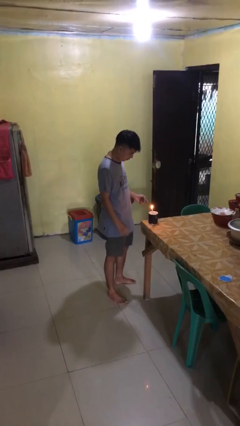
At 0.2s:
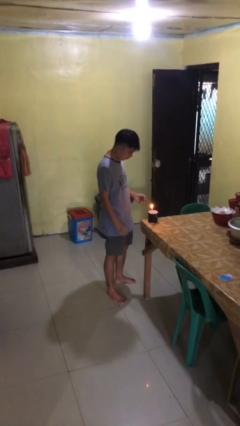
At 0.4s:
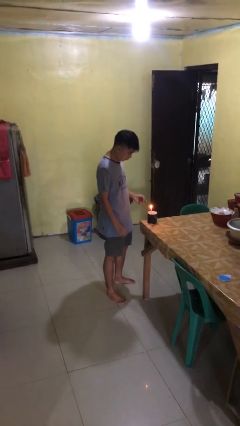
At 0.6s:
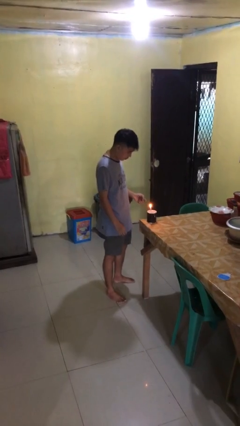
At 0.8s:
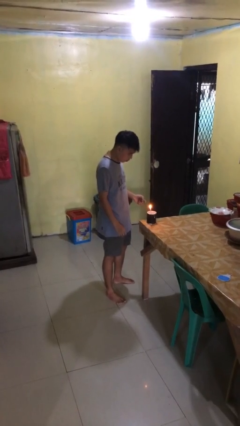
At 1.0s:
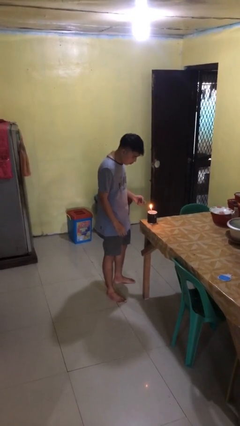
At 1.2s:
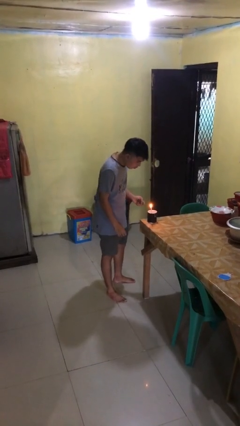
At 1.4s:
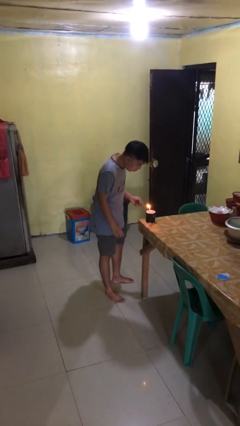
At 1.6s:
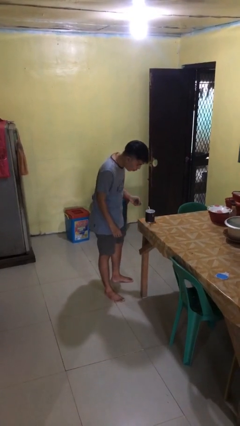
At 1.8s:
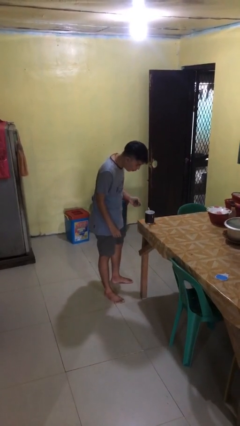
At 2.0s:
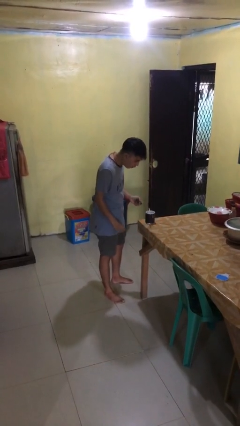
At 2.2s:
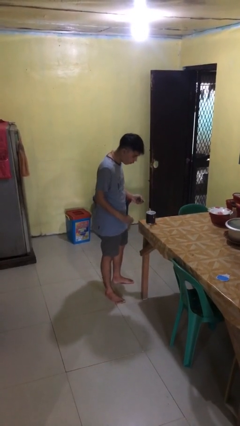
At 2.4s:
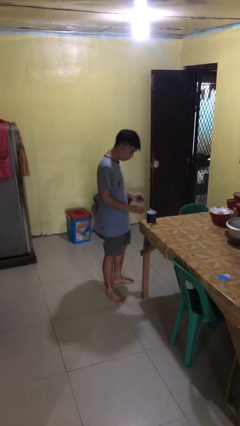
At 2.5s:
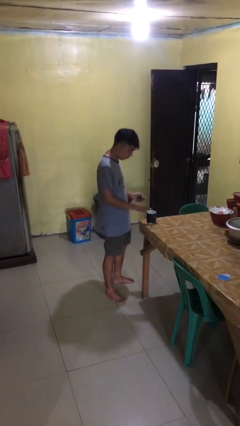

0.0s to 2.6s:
person extinguishes candle

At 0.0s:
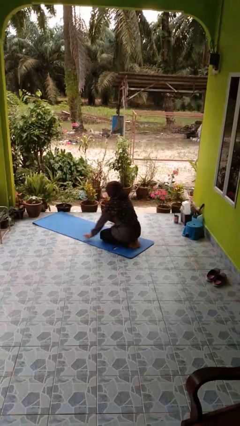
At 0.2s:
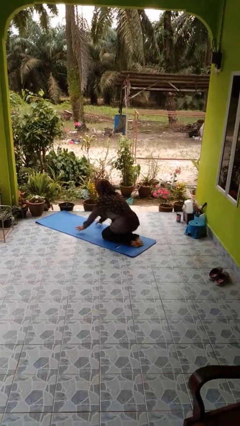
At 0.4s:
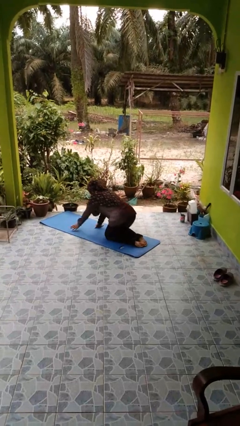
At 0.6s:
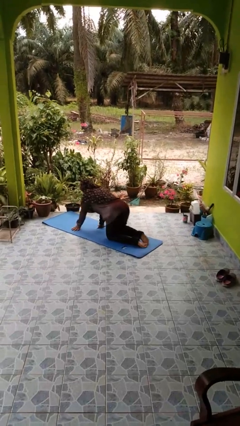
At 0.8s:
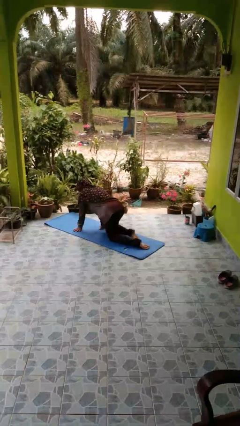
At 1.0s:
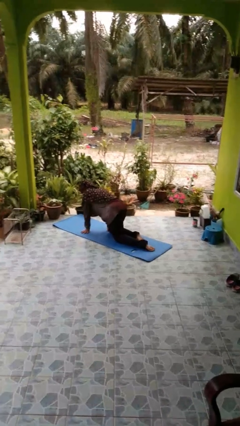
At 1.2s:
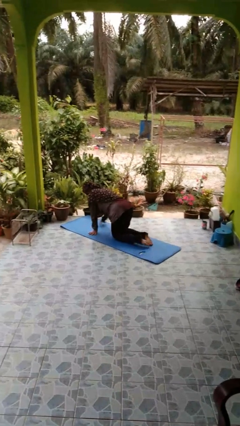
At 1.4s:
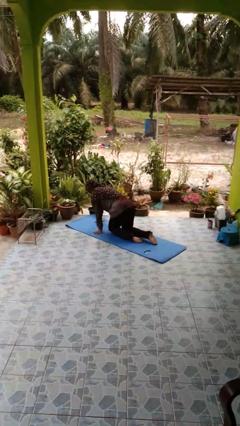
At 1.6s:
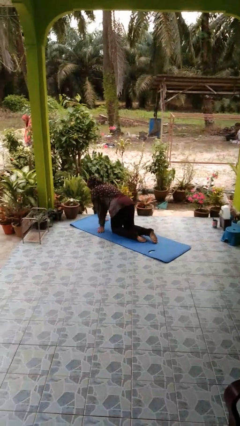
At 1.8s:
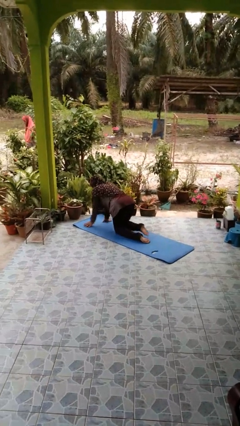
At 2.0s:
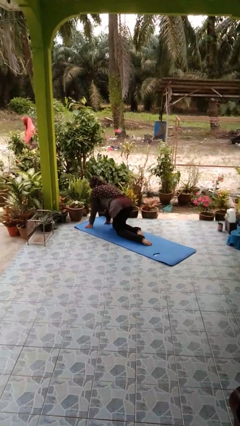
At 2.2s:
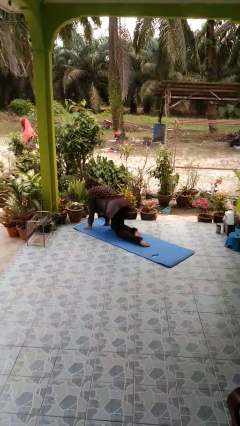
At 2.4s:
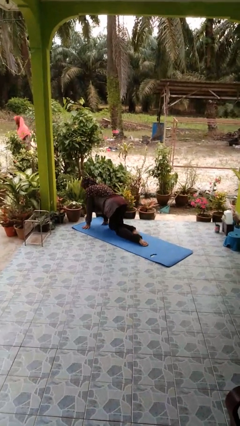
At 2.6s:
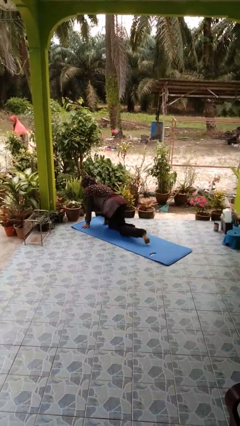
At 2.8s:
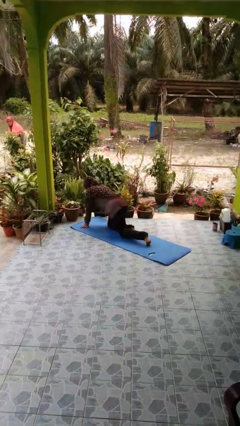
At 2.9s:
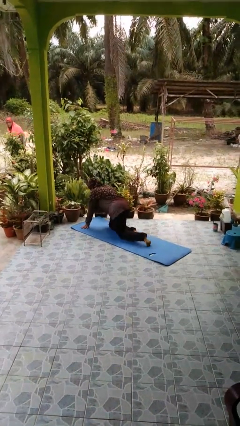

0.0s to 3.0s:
person crawls

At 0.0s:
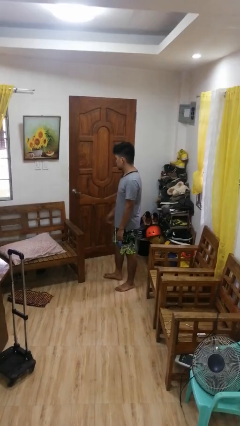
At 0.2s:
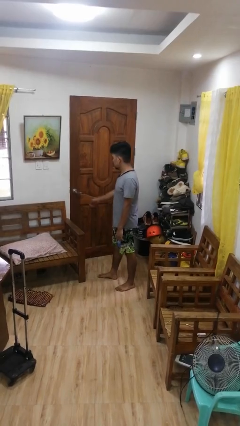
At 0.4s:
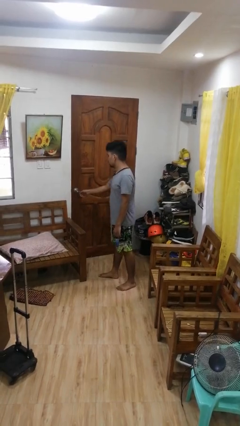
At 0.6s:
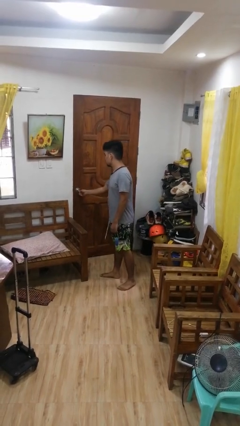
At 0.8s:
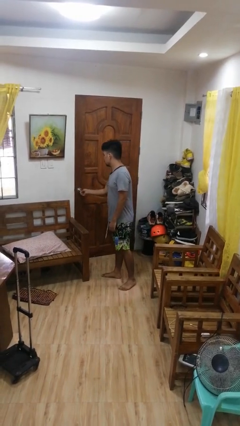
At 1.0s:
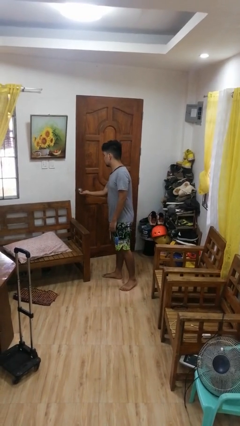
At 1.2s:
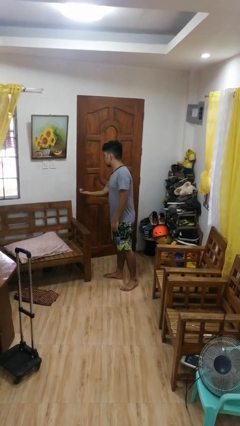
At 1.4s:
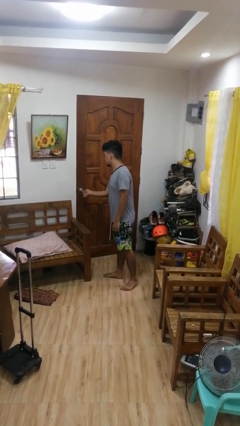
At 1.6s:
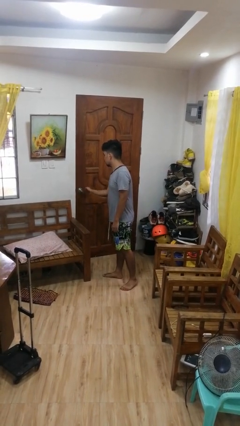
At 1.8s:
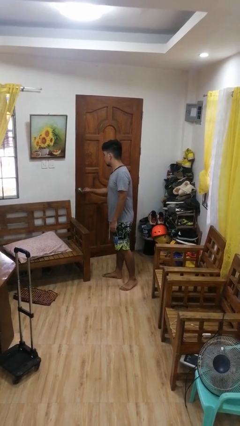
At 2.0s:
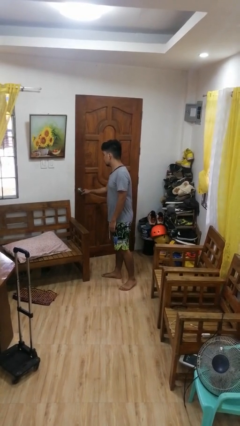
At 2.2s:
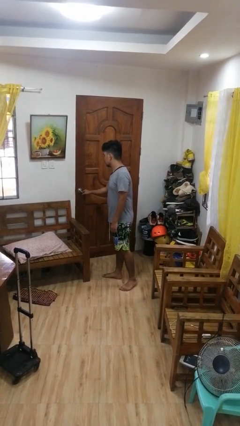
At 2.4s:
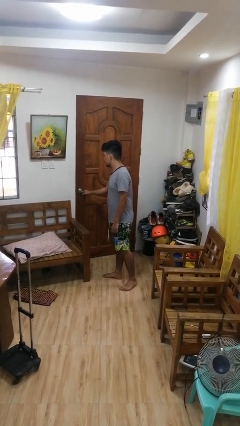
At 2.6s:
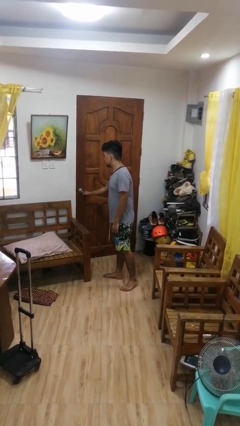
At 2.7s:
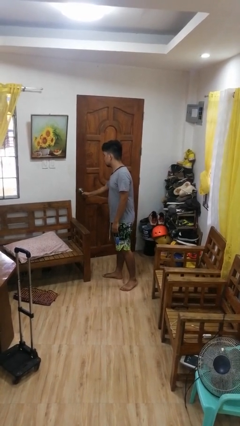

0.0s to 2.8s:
person unlocks door with keys

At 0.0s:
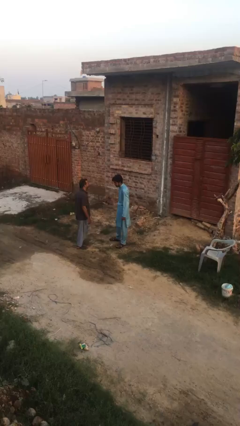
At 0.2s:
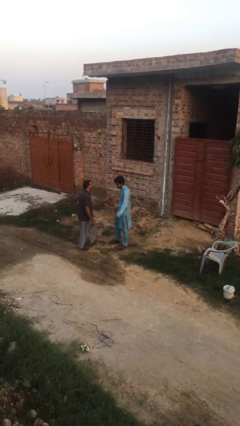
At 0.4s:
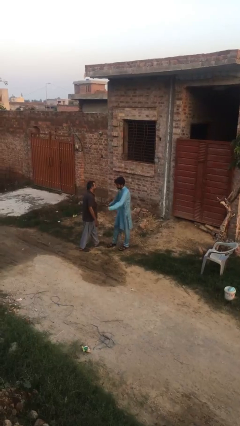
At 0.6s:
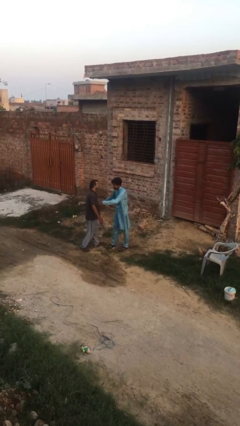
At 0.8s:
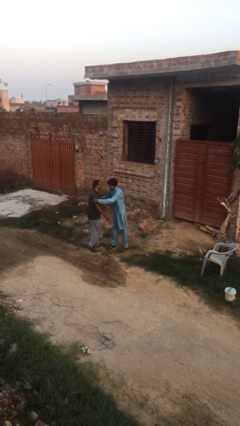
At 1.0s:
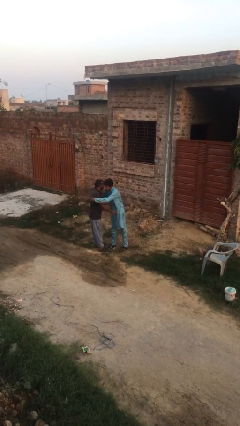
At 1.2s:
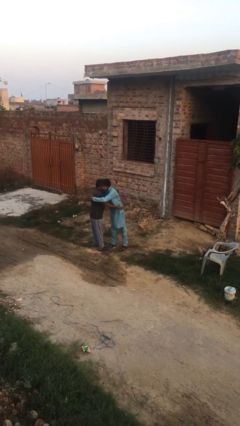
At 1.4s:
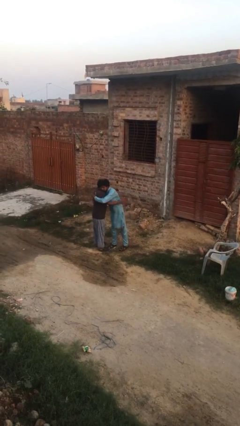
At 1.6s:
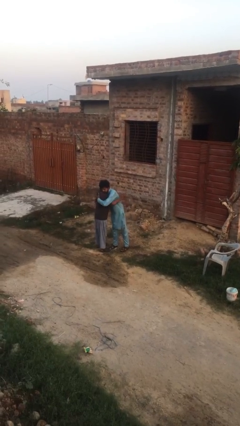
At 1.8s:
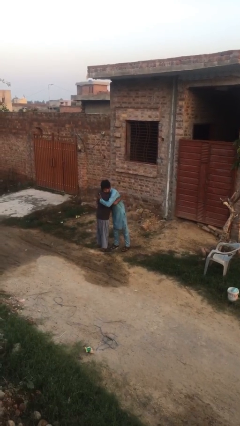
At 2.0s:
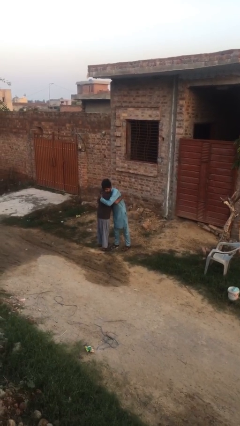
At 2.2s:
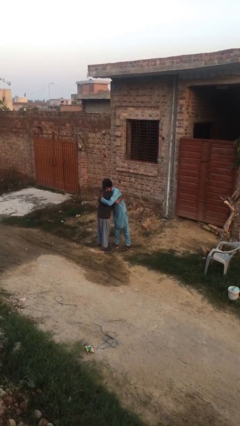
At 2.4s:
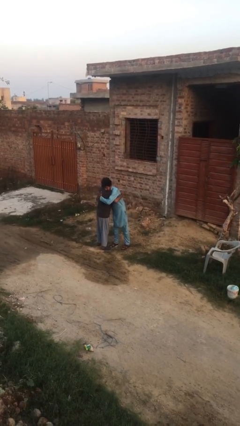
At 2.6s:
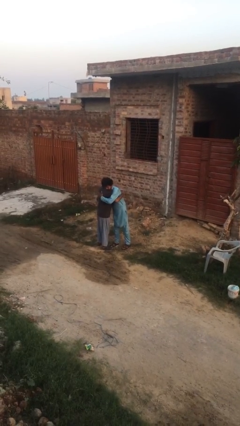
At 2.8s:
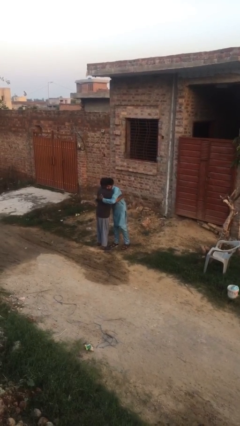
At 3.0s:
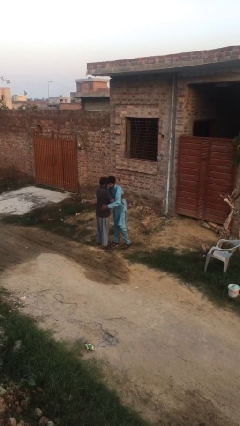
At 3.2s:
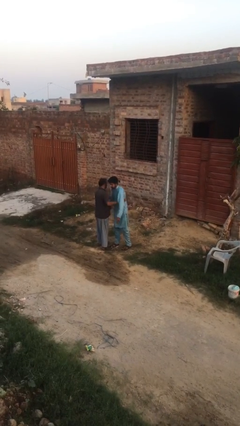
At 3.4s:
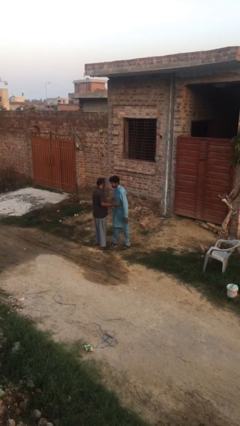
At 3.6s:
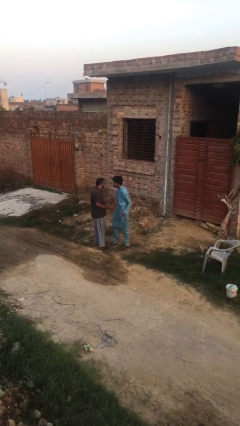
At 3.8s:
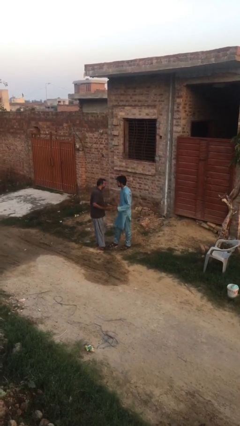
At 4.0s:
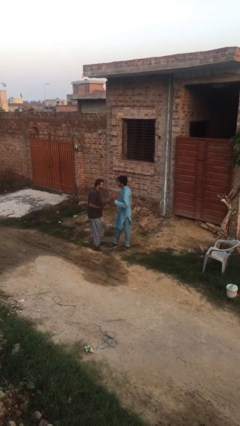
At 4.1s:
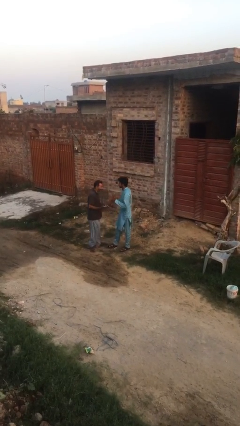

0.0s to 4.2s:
person embraces person

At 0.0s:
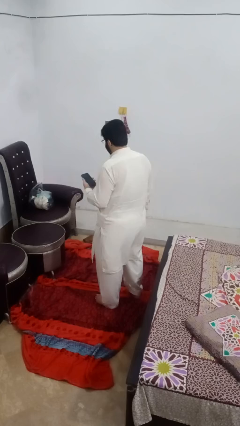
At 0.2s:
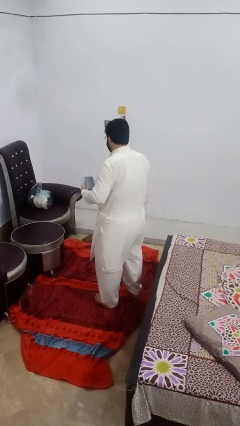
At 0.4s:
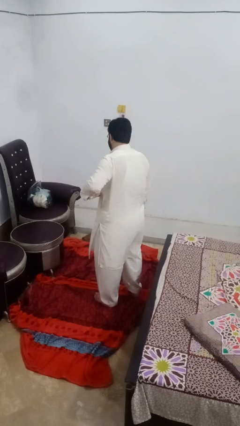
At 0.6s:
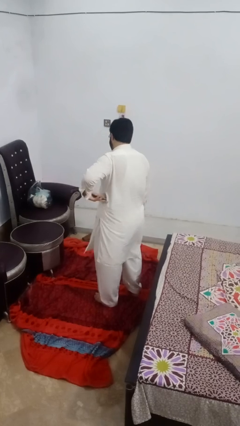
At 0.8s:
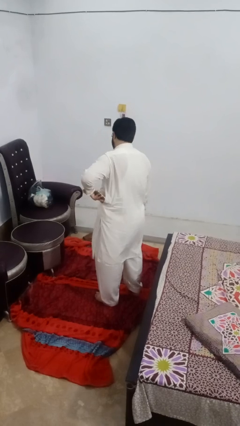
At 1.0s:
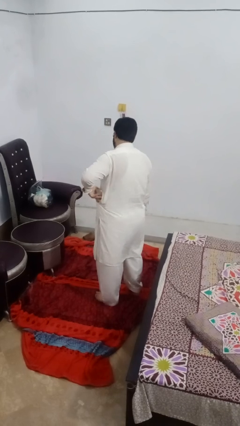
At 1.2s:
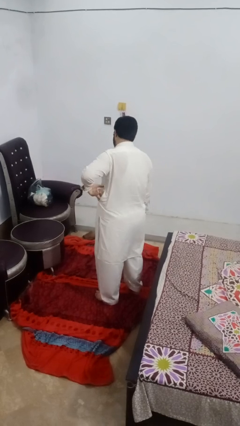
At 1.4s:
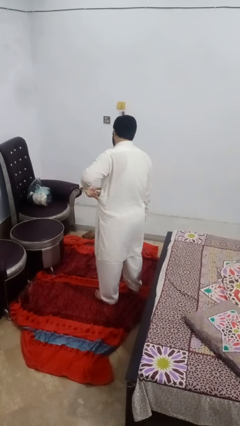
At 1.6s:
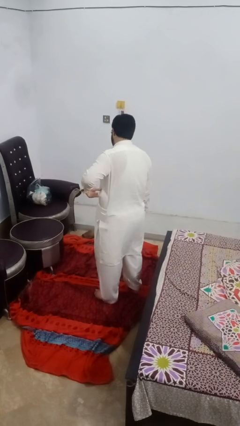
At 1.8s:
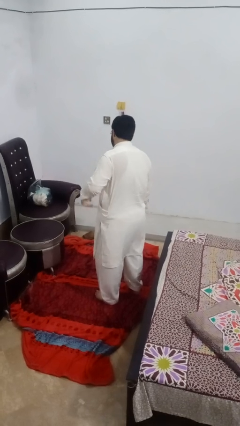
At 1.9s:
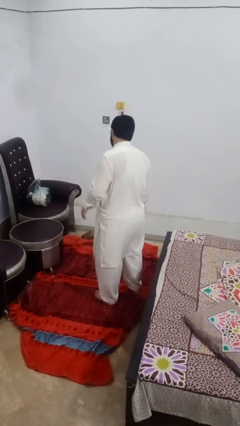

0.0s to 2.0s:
person puts phone into pocket

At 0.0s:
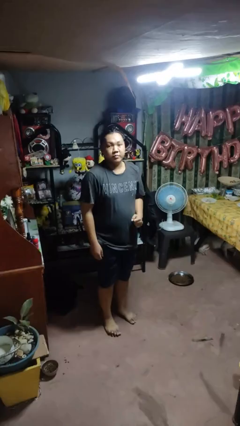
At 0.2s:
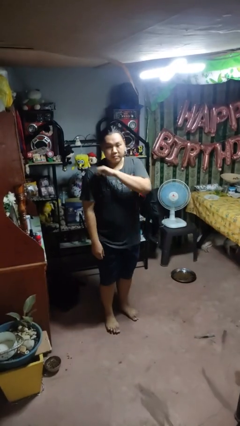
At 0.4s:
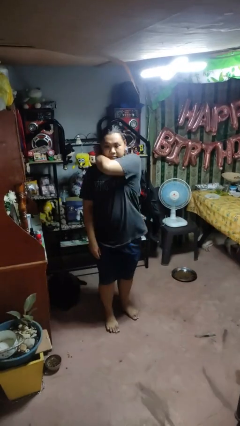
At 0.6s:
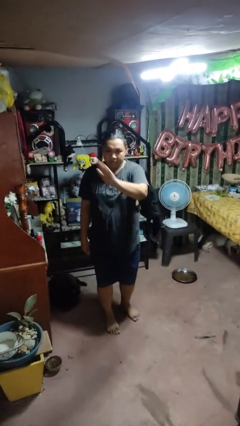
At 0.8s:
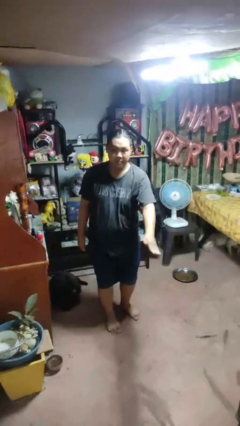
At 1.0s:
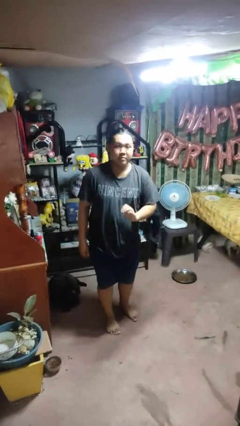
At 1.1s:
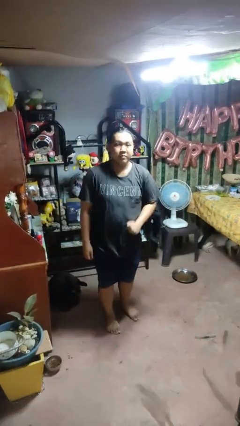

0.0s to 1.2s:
person karate chop

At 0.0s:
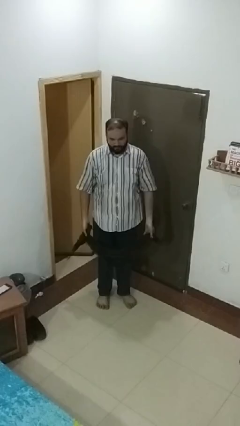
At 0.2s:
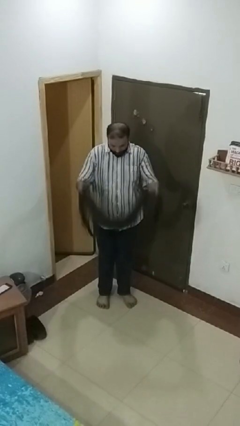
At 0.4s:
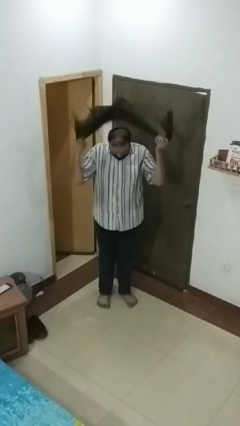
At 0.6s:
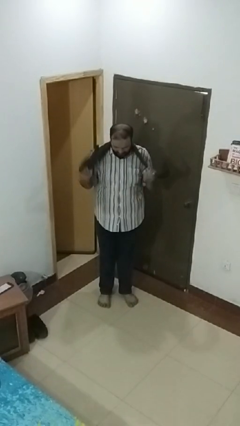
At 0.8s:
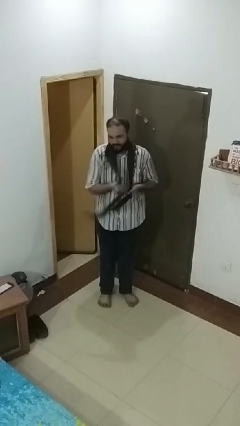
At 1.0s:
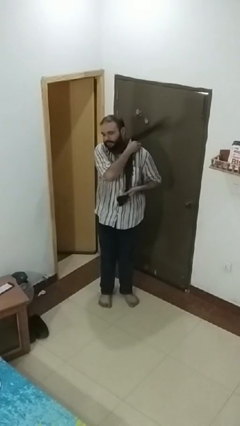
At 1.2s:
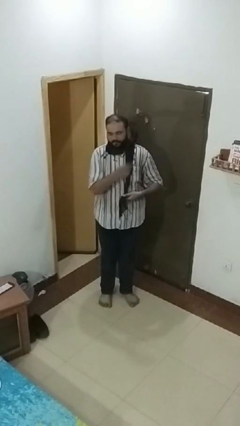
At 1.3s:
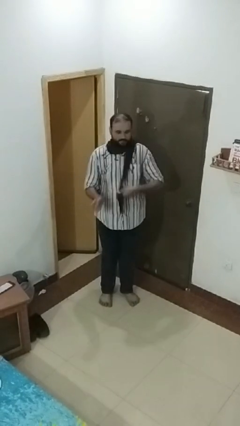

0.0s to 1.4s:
person puts on scarf

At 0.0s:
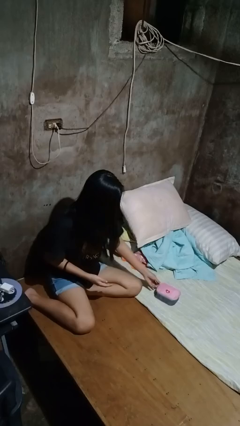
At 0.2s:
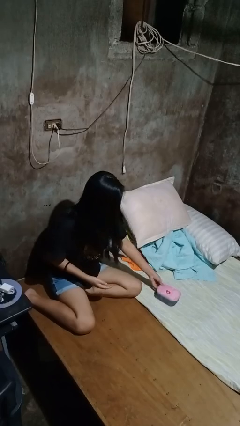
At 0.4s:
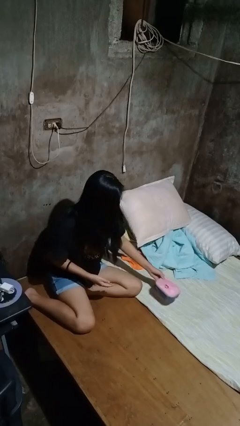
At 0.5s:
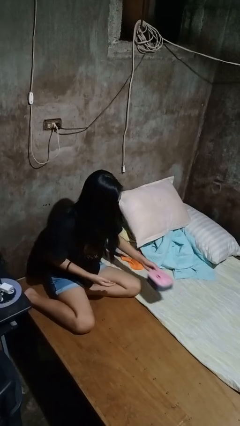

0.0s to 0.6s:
person picks up object from bed
